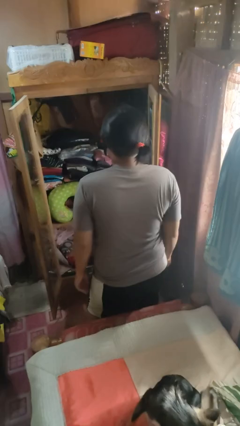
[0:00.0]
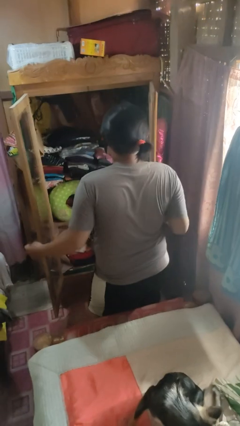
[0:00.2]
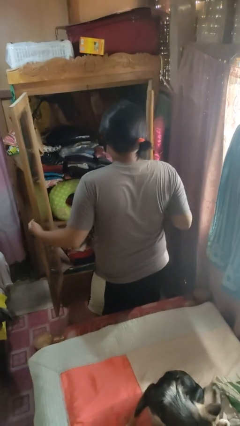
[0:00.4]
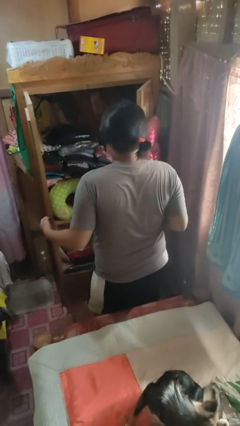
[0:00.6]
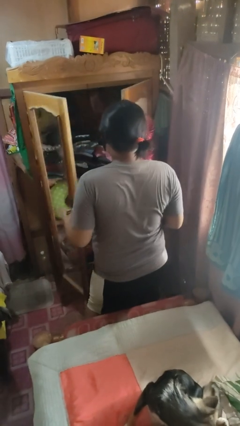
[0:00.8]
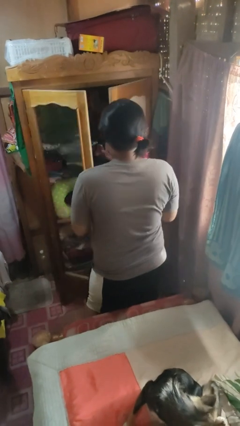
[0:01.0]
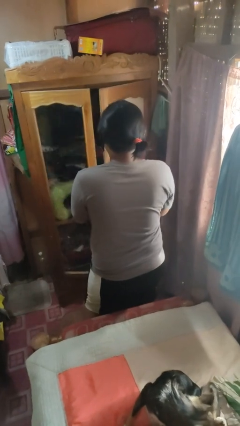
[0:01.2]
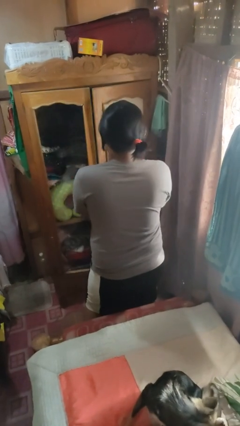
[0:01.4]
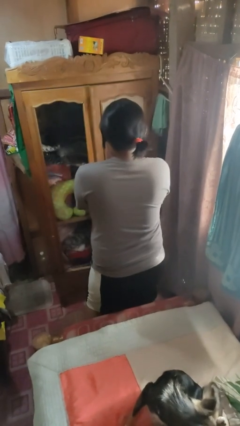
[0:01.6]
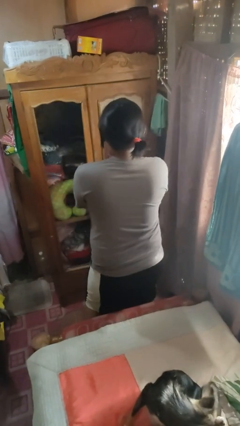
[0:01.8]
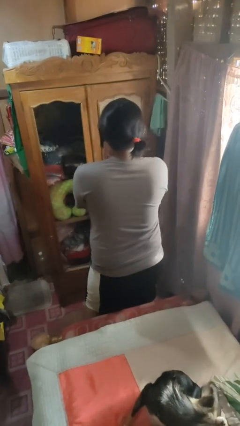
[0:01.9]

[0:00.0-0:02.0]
person closes closet door

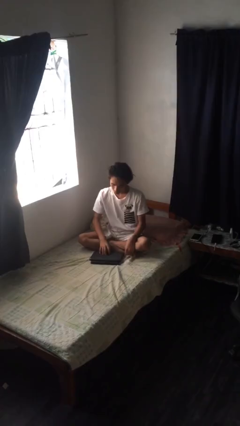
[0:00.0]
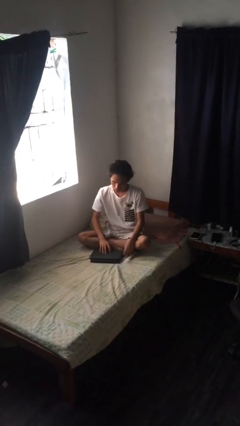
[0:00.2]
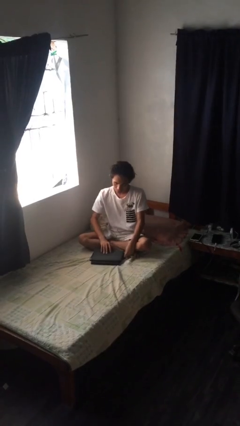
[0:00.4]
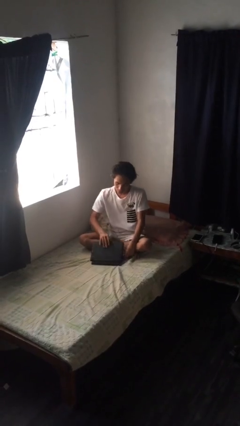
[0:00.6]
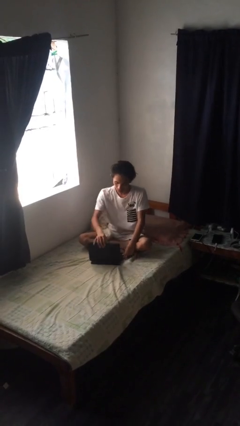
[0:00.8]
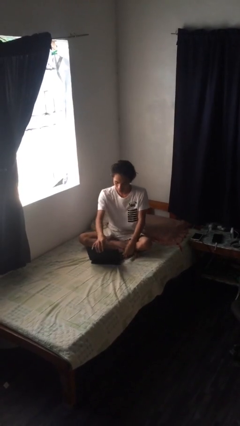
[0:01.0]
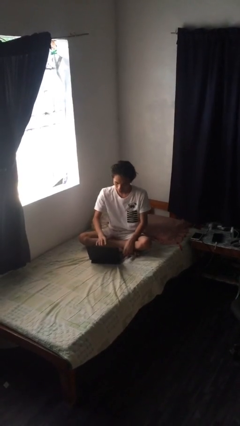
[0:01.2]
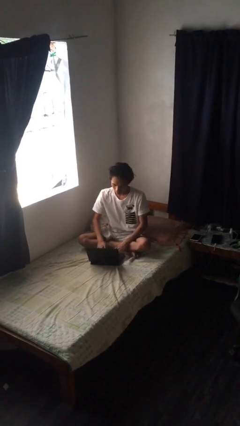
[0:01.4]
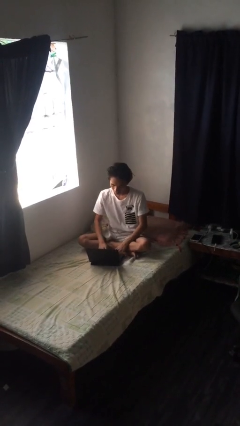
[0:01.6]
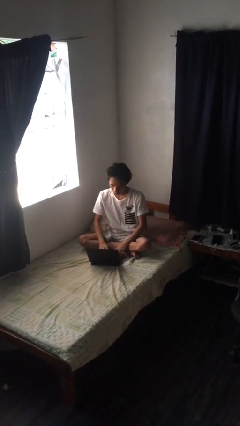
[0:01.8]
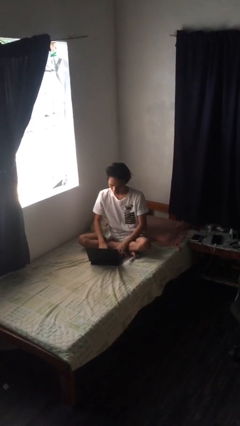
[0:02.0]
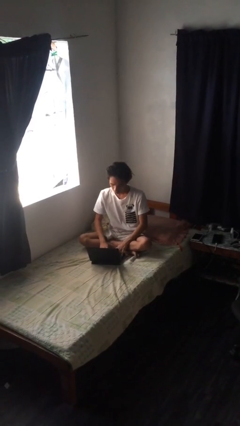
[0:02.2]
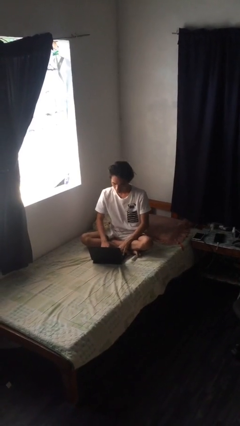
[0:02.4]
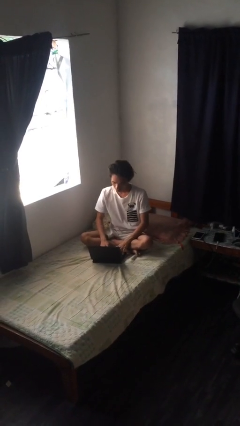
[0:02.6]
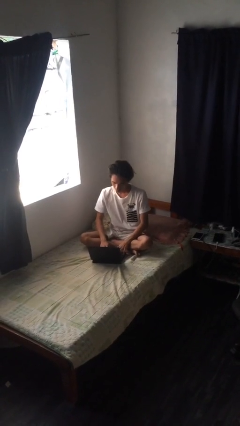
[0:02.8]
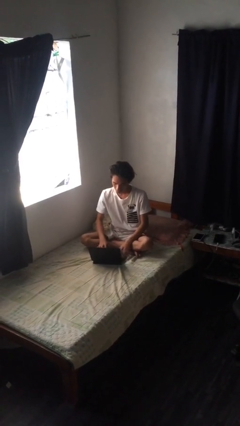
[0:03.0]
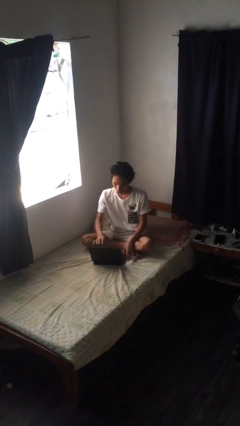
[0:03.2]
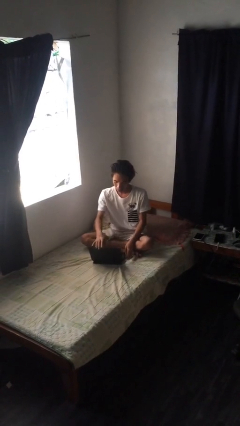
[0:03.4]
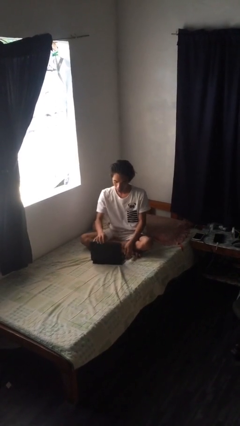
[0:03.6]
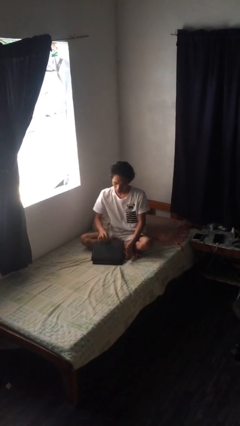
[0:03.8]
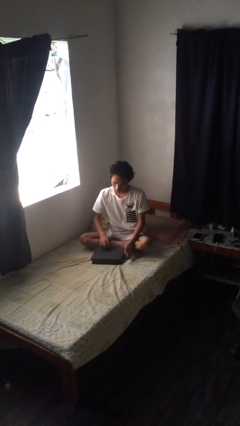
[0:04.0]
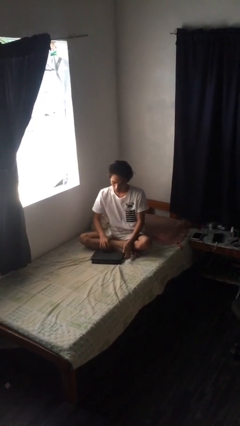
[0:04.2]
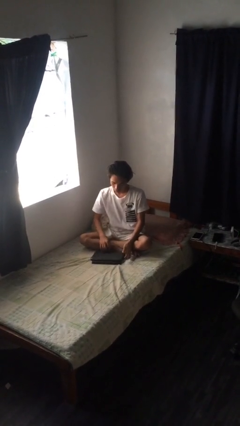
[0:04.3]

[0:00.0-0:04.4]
person interacts with laptop

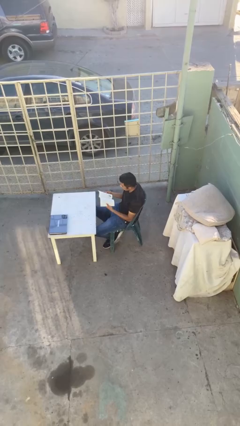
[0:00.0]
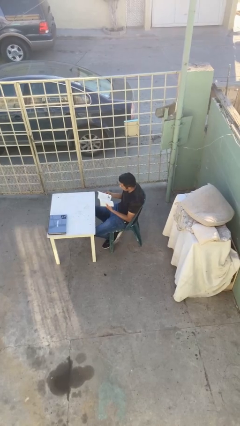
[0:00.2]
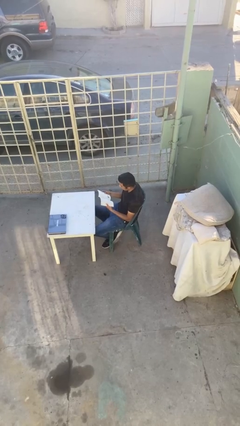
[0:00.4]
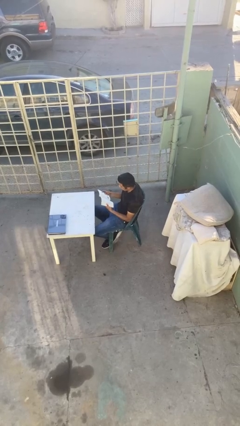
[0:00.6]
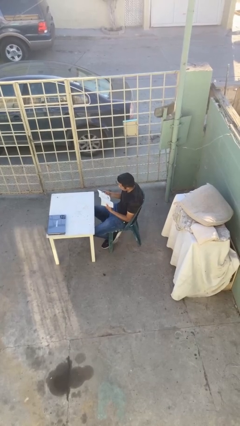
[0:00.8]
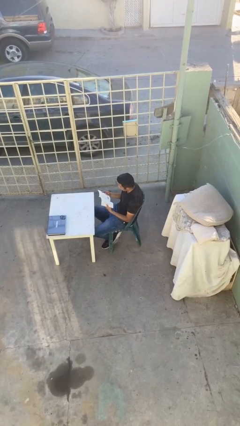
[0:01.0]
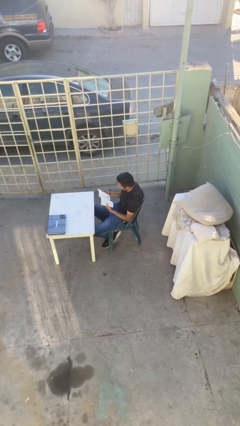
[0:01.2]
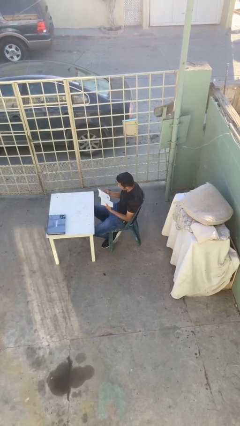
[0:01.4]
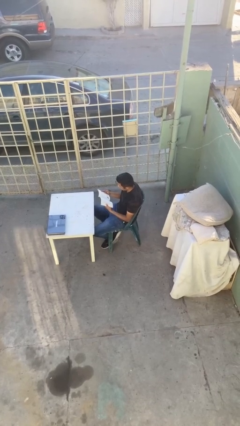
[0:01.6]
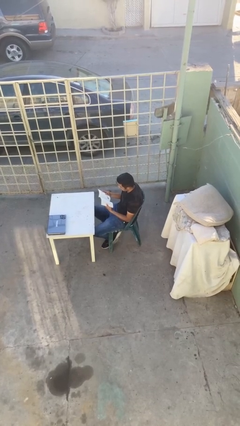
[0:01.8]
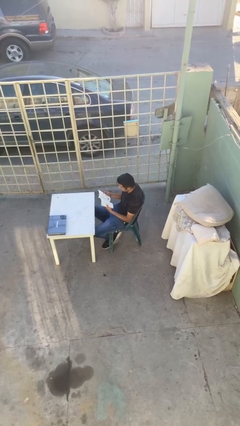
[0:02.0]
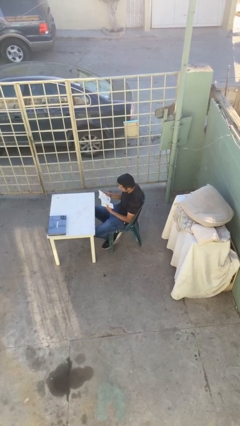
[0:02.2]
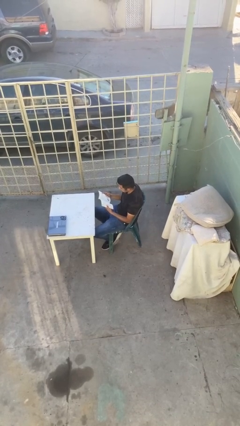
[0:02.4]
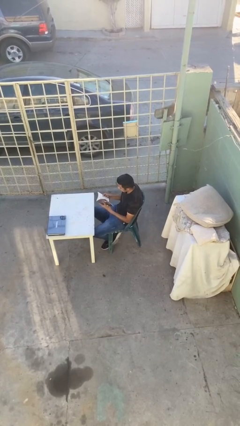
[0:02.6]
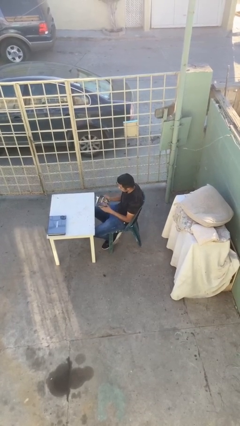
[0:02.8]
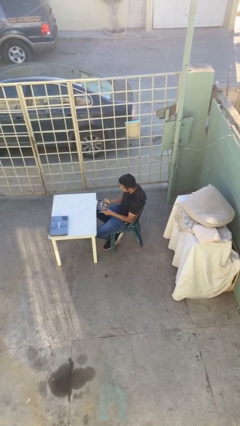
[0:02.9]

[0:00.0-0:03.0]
person reads document

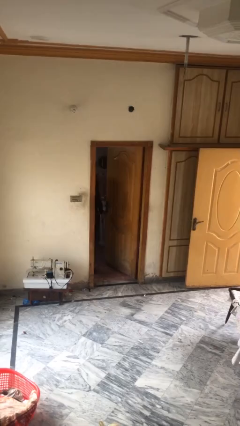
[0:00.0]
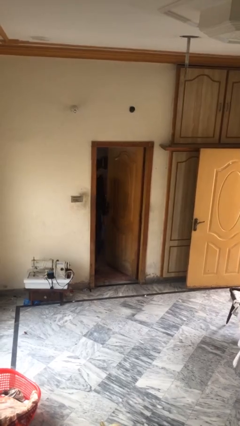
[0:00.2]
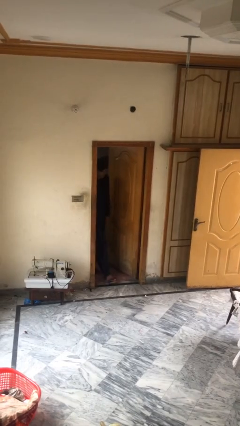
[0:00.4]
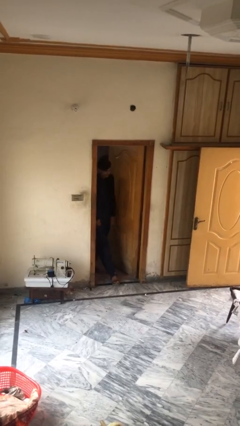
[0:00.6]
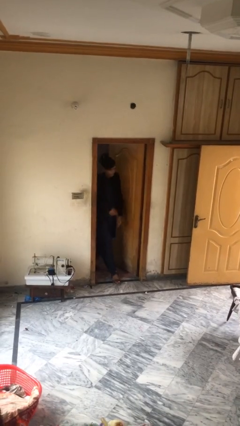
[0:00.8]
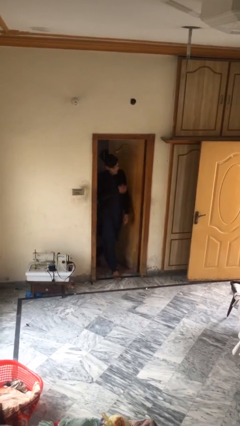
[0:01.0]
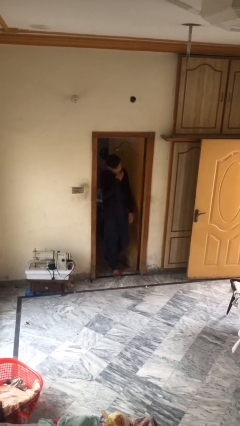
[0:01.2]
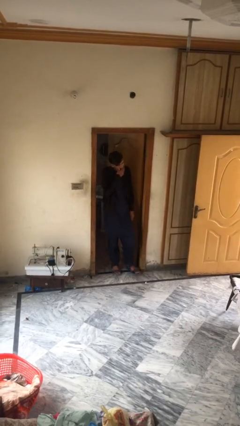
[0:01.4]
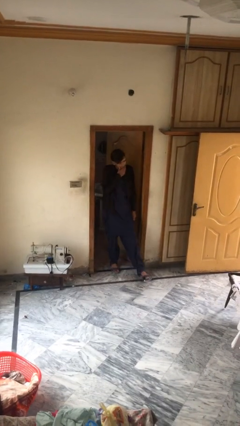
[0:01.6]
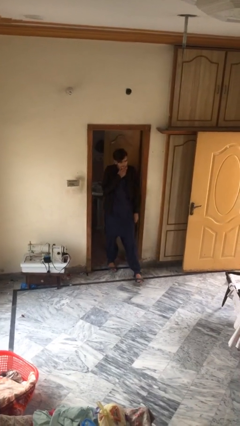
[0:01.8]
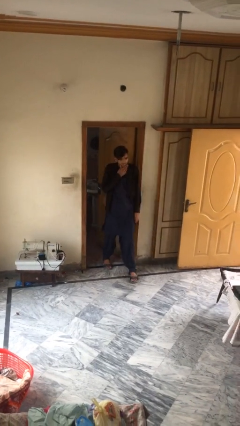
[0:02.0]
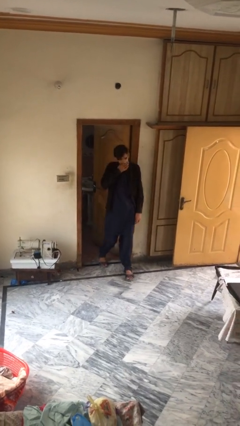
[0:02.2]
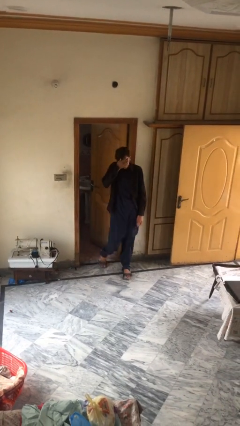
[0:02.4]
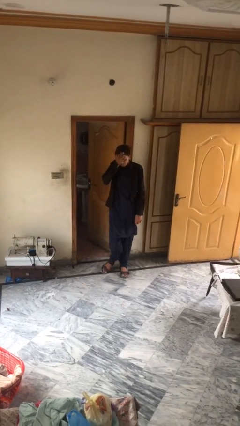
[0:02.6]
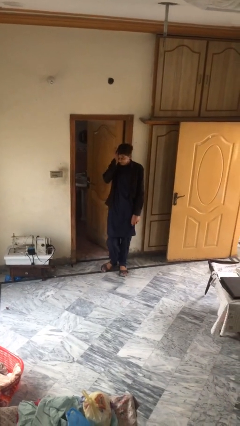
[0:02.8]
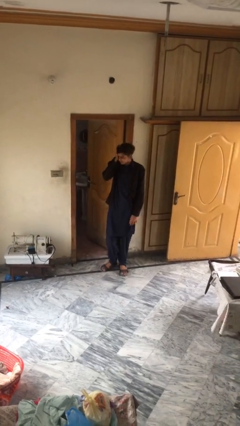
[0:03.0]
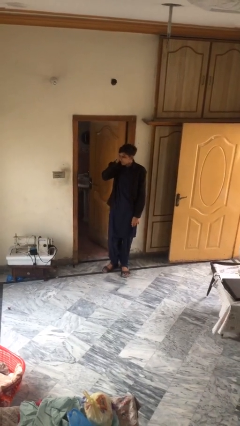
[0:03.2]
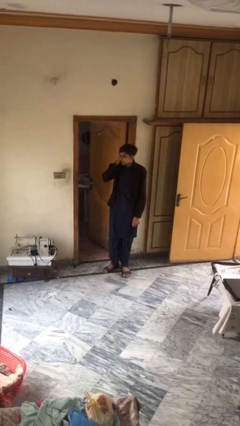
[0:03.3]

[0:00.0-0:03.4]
person enters scene through structure

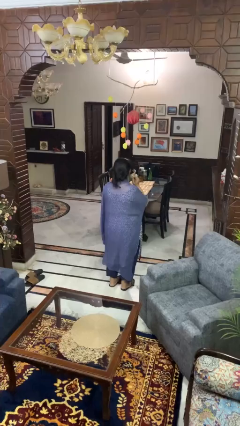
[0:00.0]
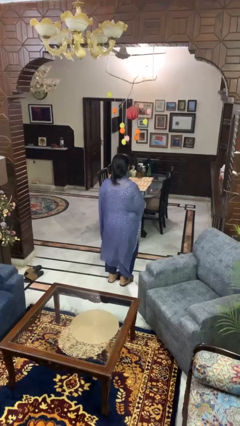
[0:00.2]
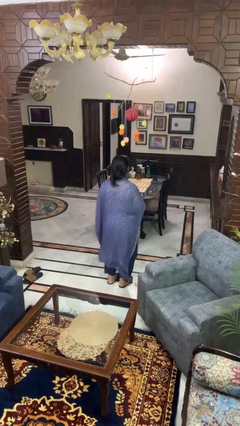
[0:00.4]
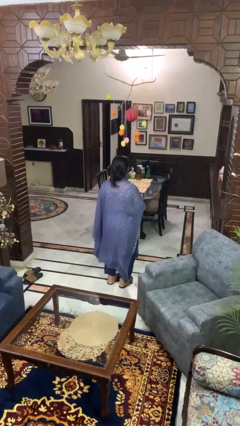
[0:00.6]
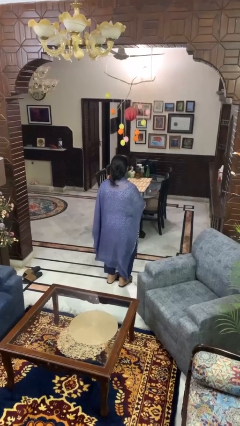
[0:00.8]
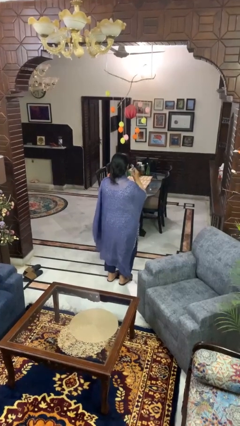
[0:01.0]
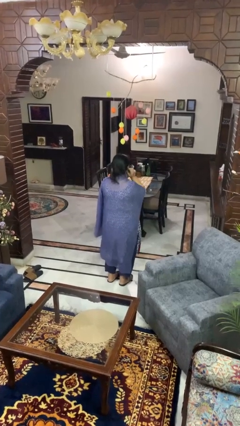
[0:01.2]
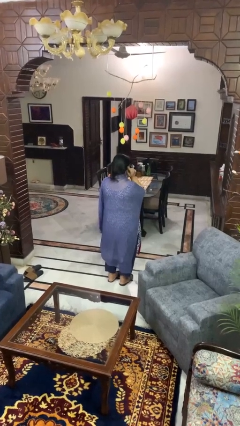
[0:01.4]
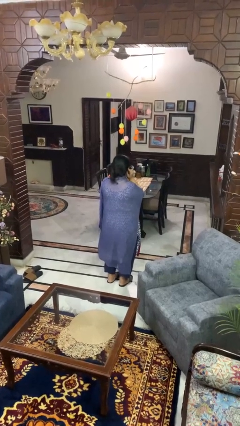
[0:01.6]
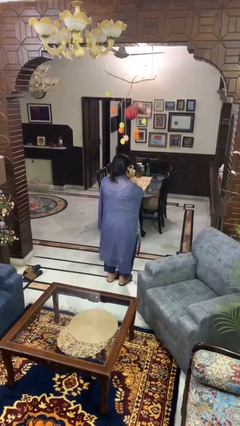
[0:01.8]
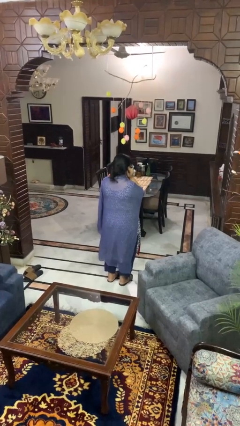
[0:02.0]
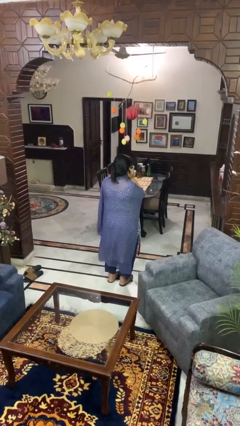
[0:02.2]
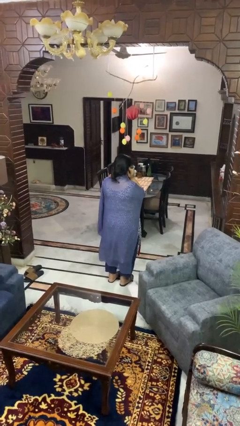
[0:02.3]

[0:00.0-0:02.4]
person puts fingers in ear

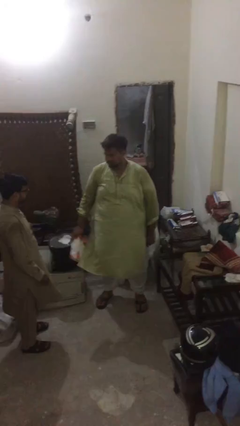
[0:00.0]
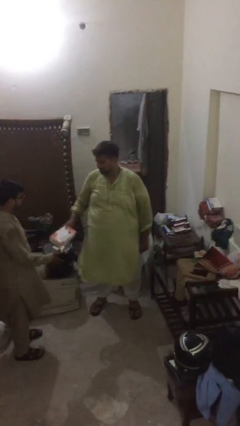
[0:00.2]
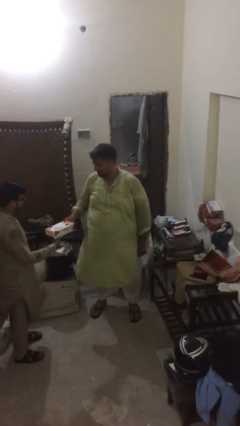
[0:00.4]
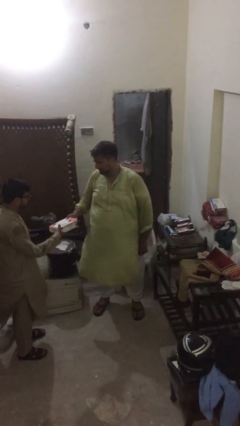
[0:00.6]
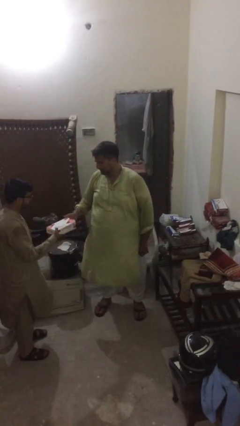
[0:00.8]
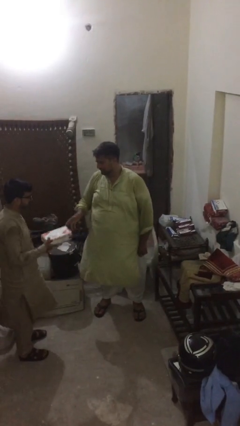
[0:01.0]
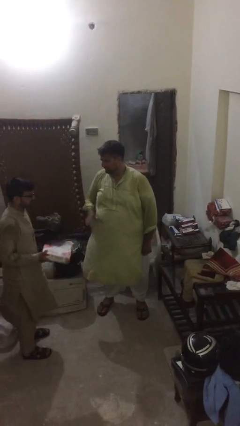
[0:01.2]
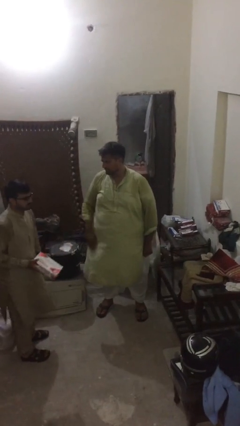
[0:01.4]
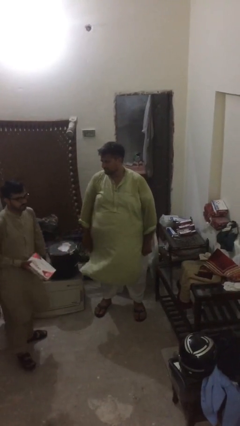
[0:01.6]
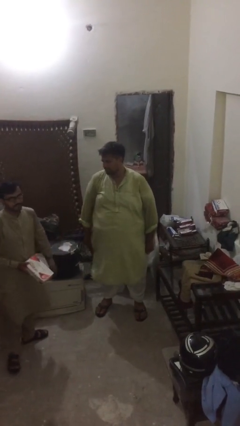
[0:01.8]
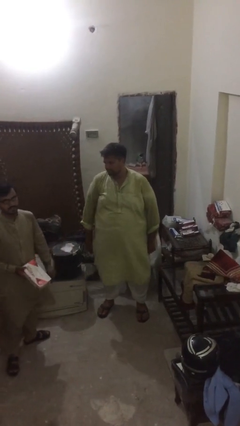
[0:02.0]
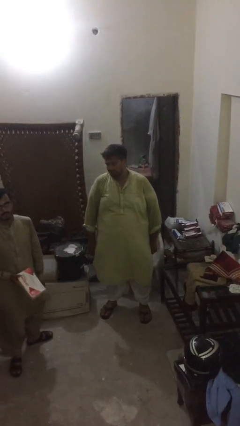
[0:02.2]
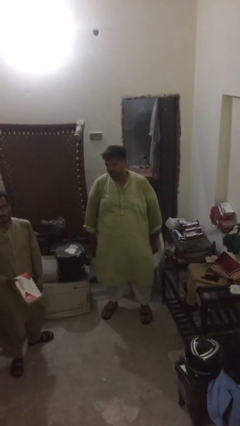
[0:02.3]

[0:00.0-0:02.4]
person transfers object to person
